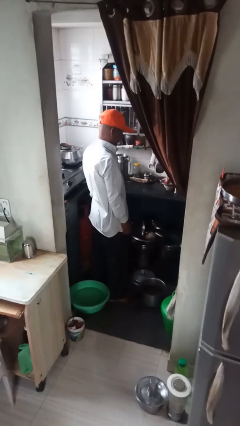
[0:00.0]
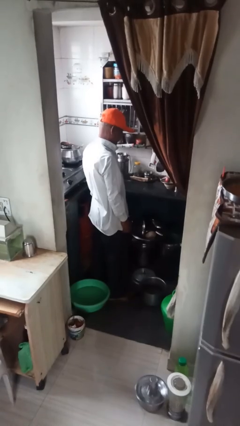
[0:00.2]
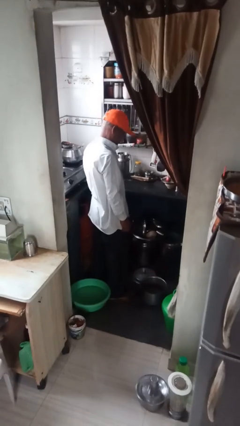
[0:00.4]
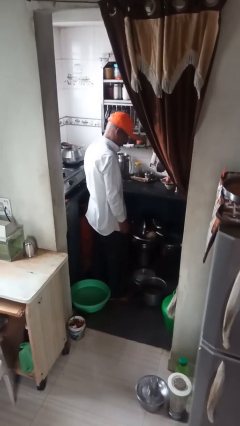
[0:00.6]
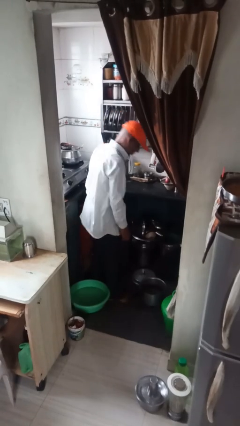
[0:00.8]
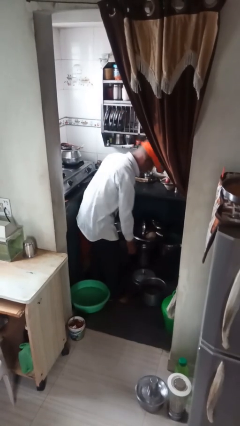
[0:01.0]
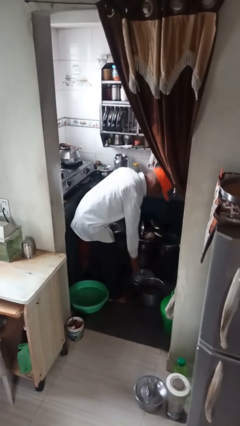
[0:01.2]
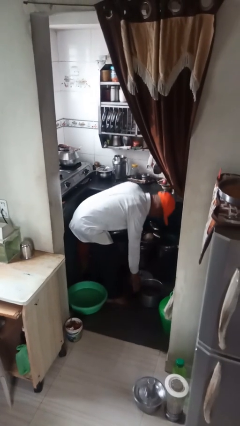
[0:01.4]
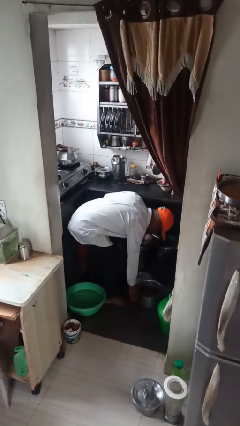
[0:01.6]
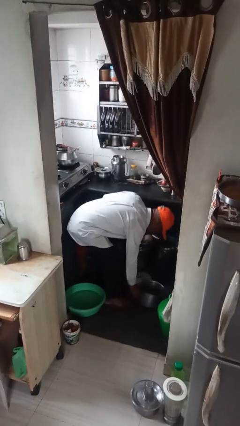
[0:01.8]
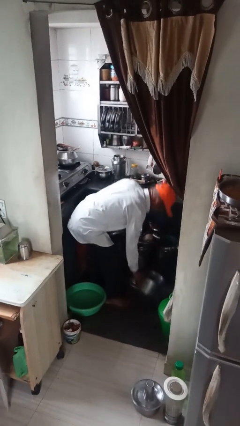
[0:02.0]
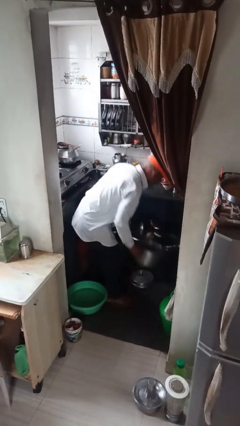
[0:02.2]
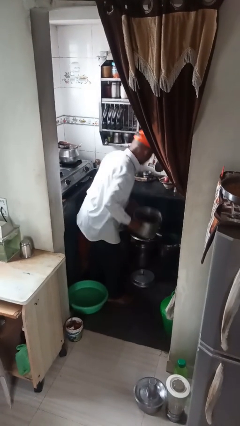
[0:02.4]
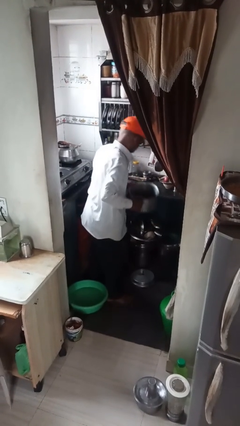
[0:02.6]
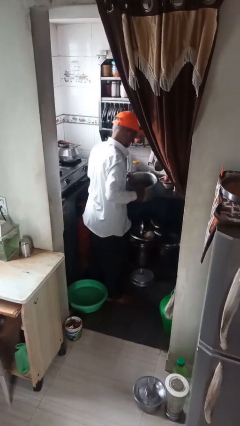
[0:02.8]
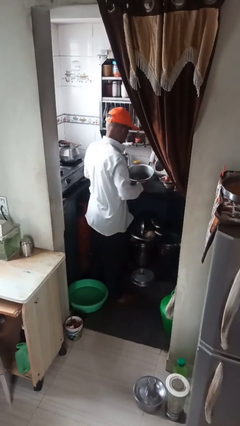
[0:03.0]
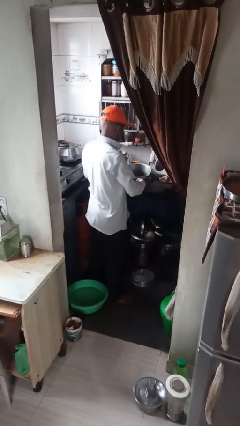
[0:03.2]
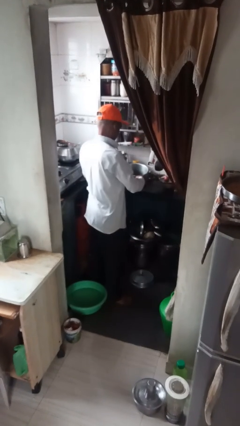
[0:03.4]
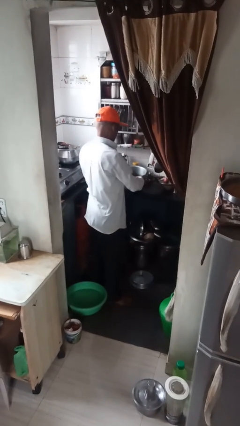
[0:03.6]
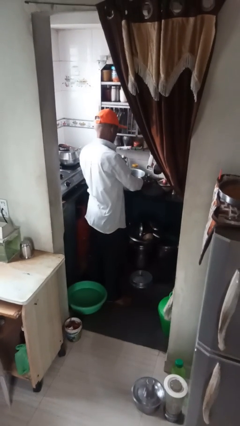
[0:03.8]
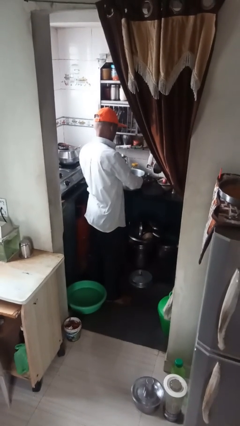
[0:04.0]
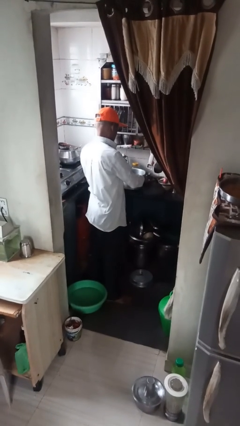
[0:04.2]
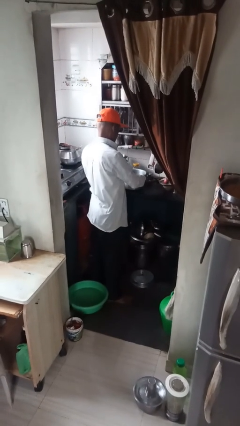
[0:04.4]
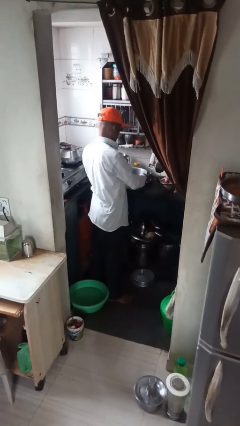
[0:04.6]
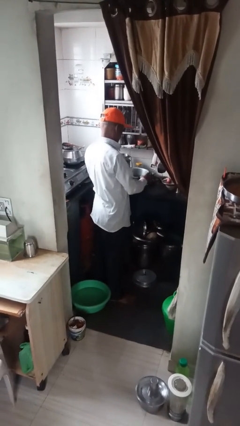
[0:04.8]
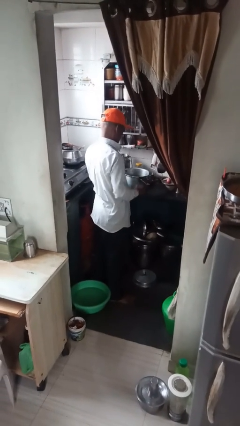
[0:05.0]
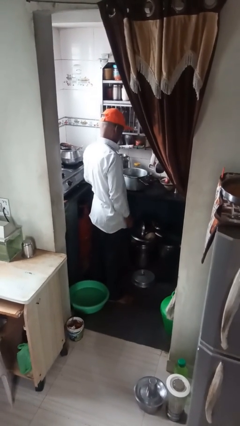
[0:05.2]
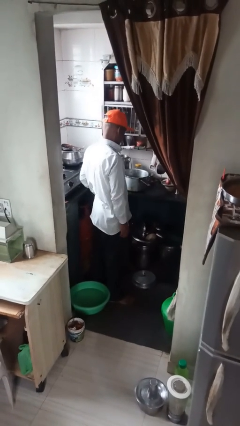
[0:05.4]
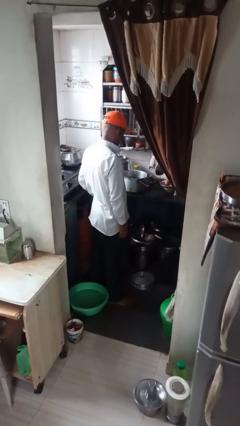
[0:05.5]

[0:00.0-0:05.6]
person picks up object from countertop

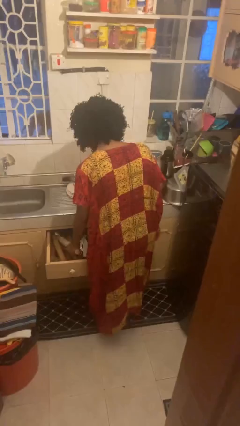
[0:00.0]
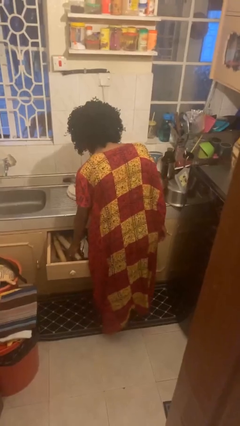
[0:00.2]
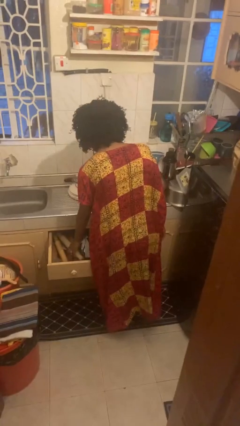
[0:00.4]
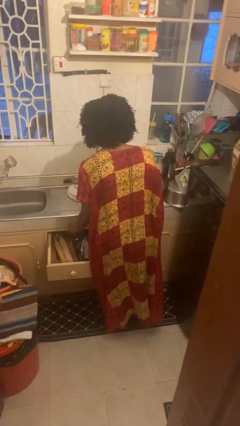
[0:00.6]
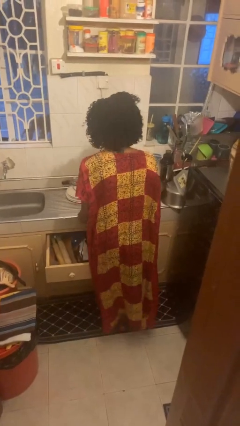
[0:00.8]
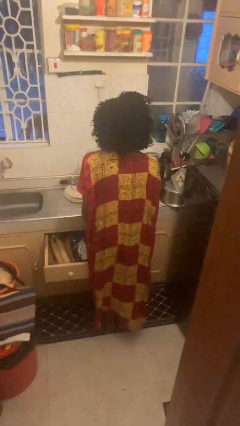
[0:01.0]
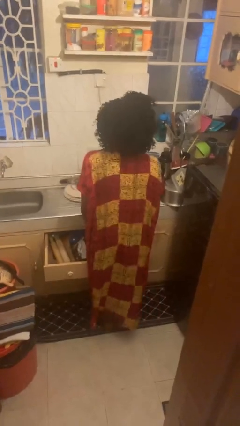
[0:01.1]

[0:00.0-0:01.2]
person puts object into kitchen drawer

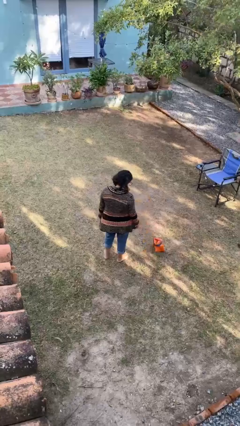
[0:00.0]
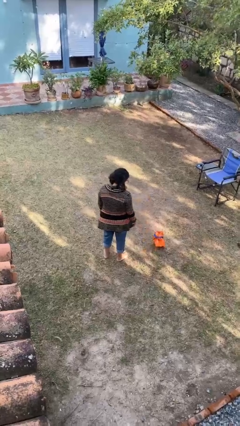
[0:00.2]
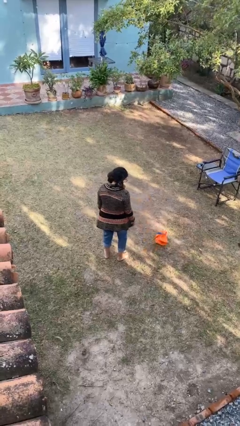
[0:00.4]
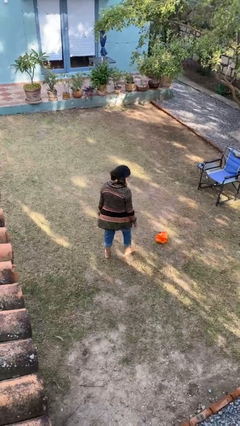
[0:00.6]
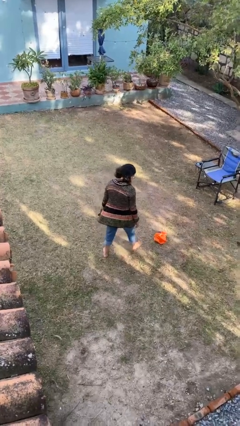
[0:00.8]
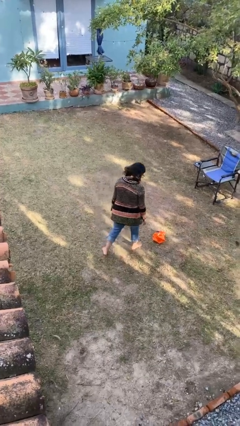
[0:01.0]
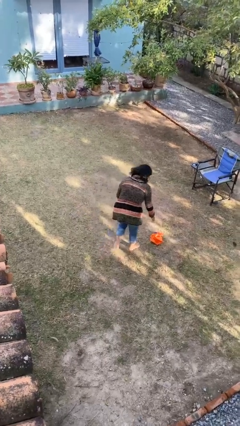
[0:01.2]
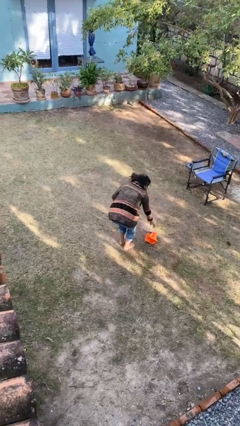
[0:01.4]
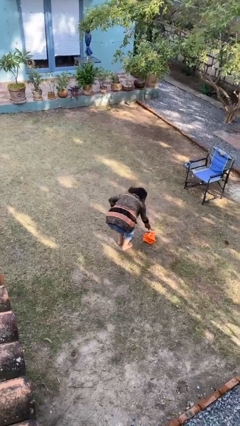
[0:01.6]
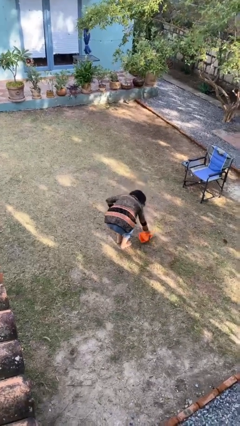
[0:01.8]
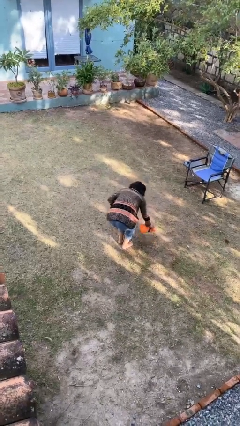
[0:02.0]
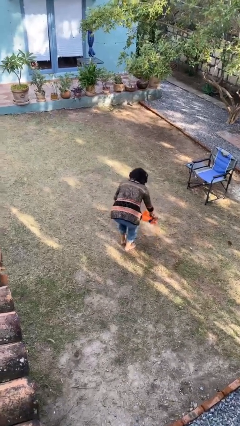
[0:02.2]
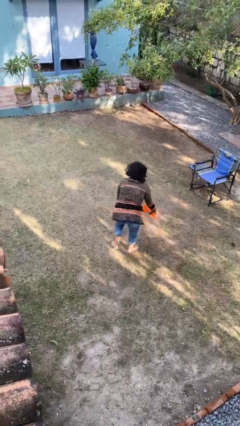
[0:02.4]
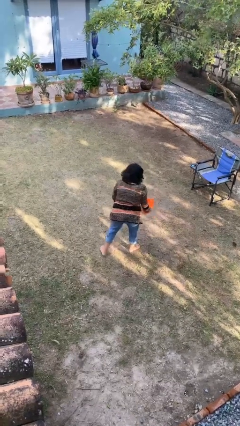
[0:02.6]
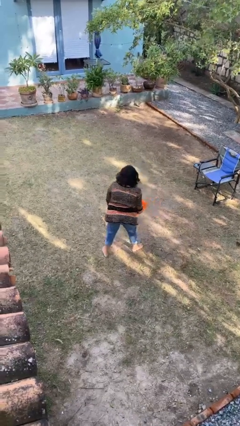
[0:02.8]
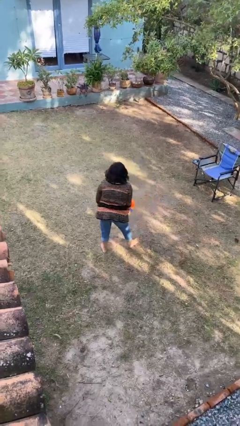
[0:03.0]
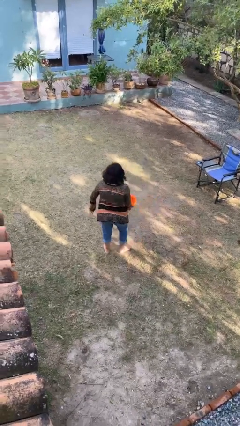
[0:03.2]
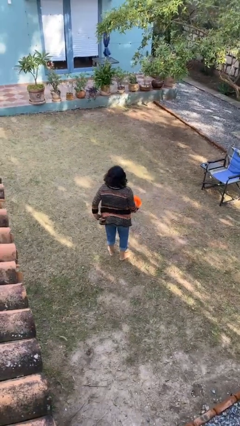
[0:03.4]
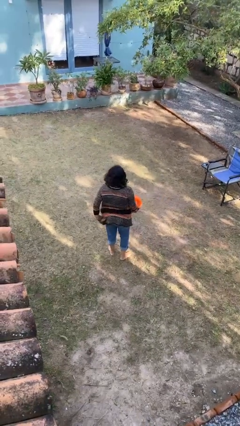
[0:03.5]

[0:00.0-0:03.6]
person picks up object from floor

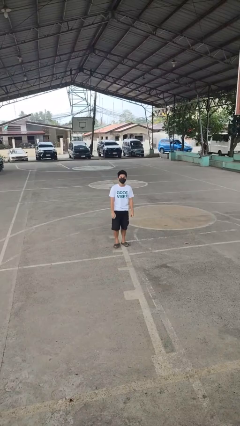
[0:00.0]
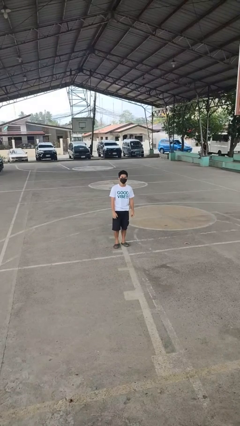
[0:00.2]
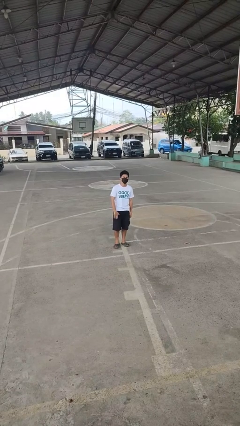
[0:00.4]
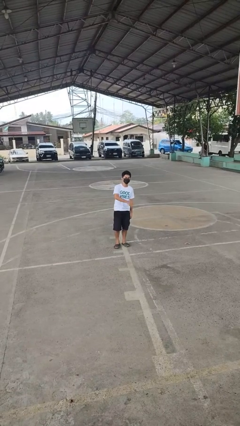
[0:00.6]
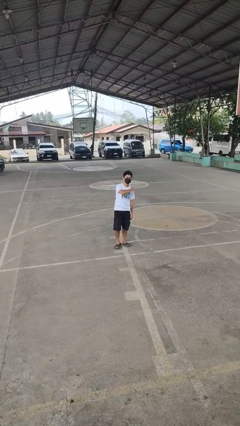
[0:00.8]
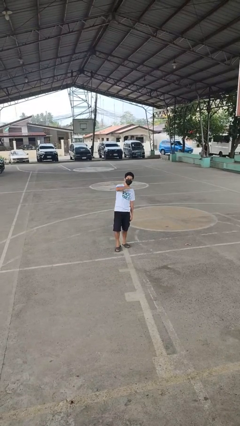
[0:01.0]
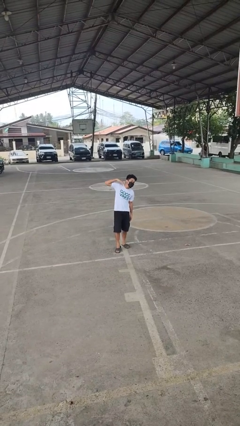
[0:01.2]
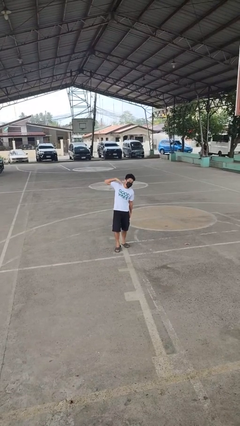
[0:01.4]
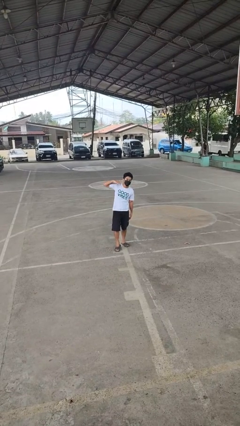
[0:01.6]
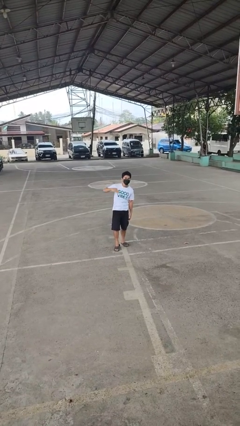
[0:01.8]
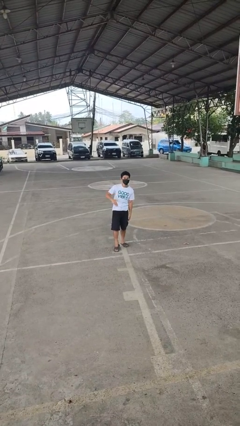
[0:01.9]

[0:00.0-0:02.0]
person gestures cut

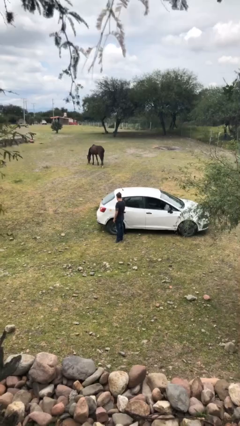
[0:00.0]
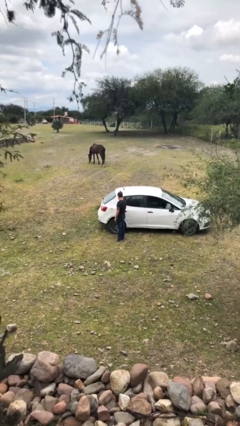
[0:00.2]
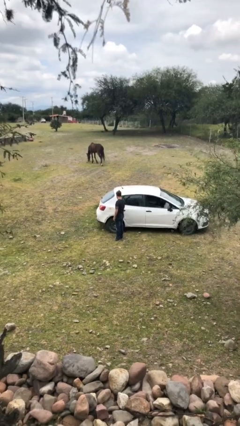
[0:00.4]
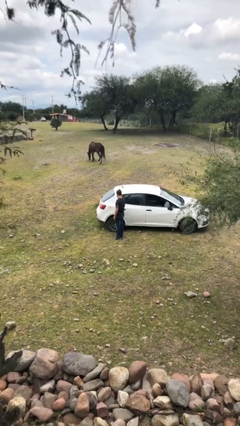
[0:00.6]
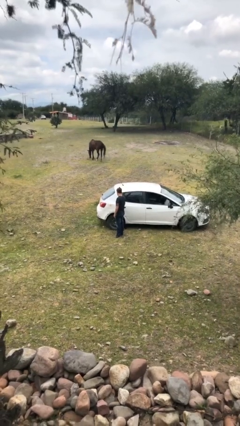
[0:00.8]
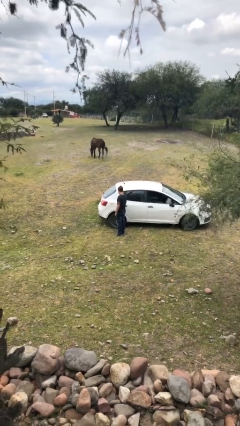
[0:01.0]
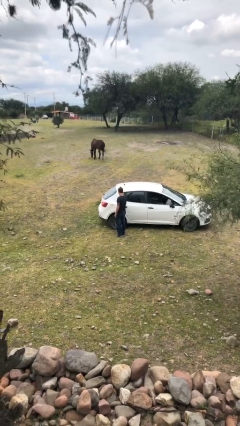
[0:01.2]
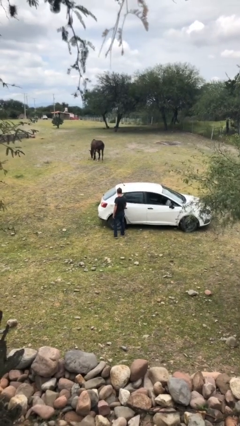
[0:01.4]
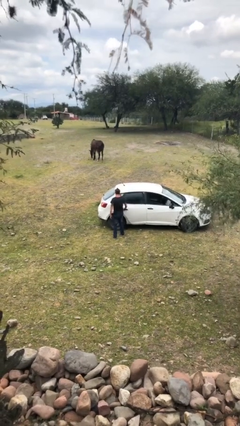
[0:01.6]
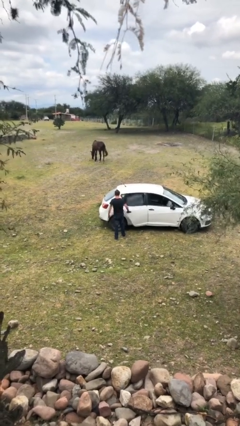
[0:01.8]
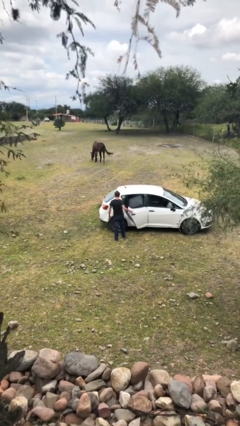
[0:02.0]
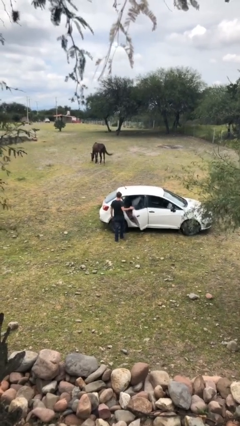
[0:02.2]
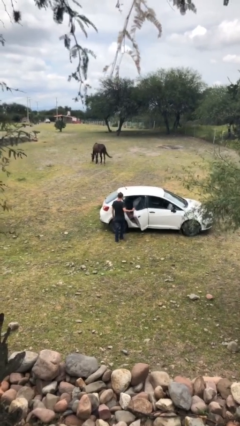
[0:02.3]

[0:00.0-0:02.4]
person opens car door

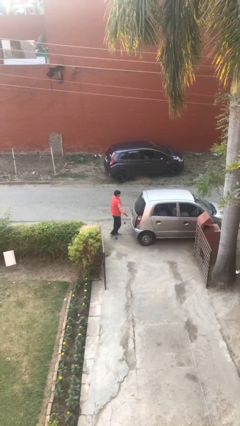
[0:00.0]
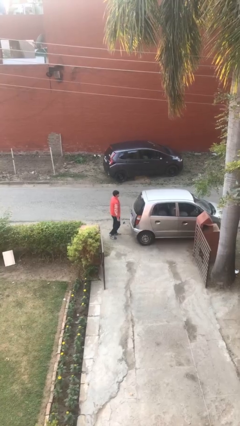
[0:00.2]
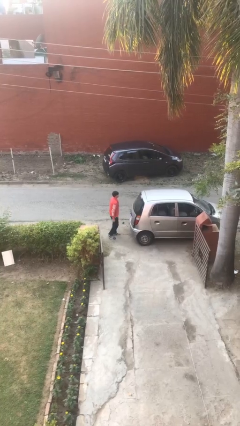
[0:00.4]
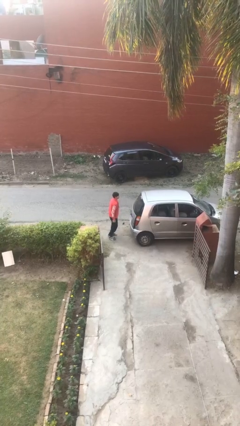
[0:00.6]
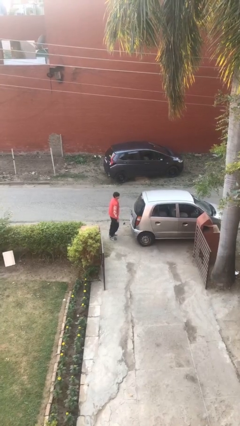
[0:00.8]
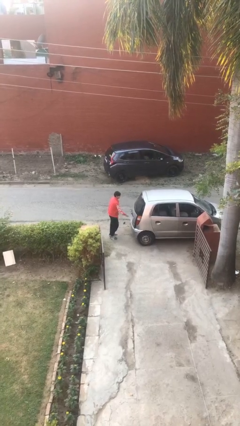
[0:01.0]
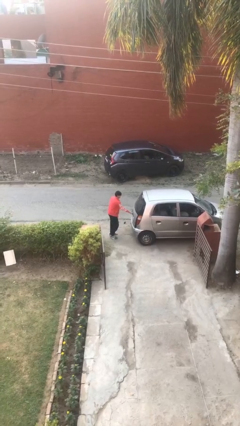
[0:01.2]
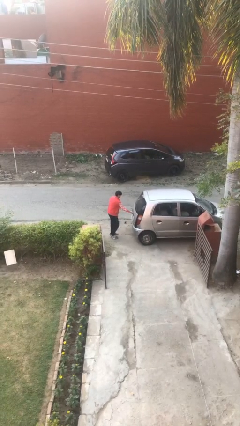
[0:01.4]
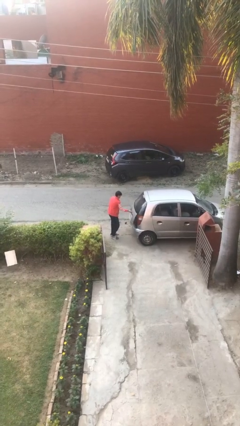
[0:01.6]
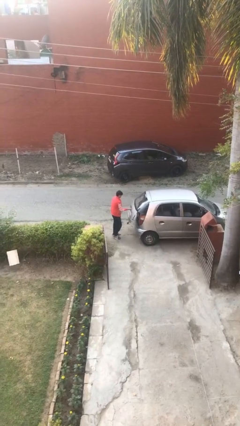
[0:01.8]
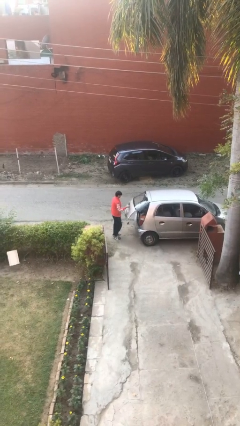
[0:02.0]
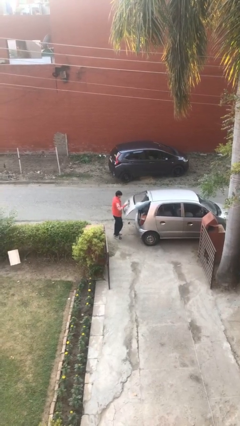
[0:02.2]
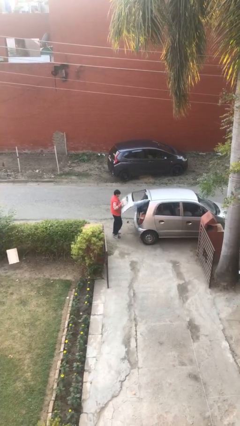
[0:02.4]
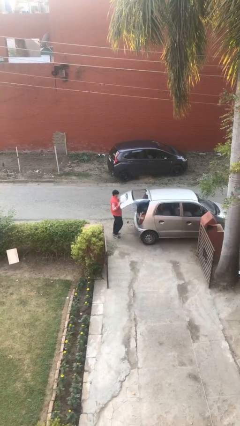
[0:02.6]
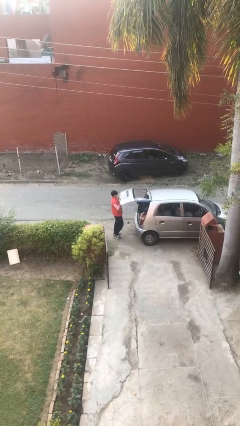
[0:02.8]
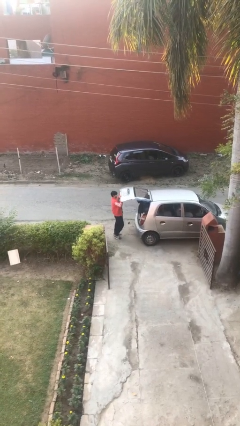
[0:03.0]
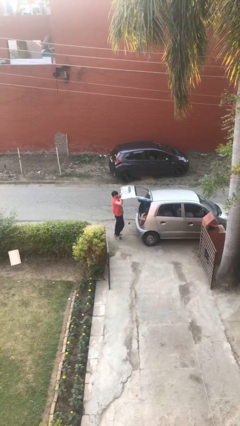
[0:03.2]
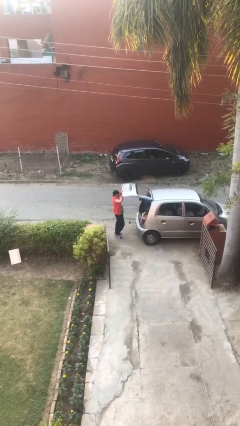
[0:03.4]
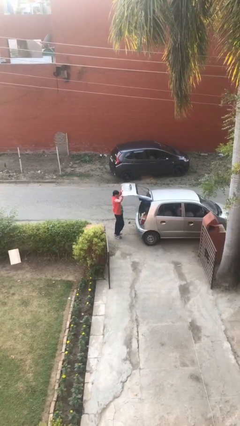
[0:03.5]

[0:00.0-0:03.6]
person opens car trunk
